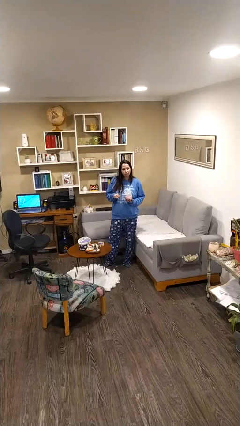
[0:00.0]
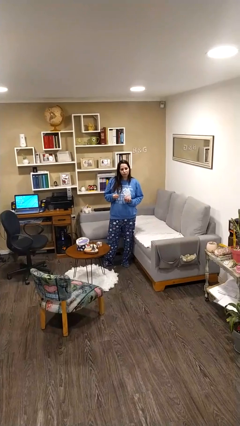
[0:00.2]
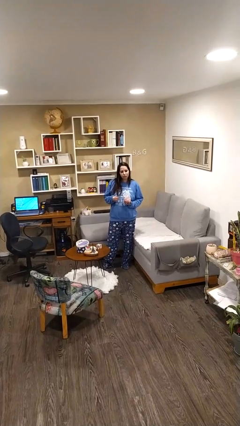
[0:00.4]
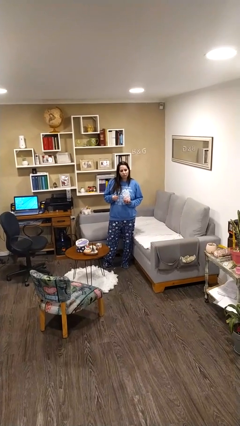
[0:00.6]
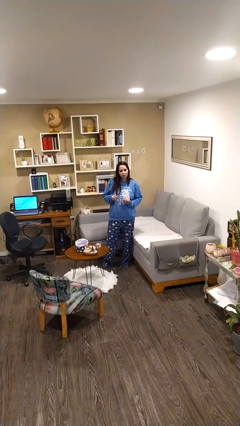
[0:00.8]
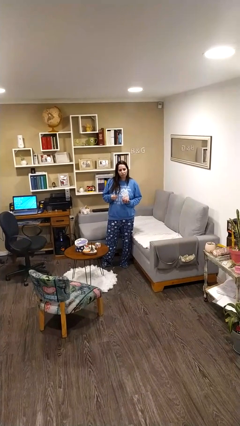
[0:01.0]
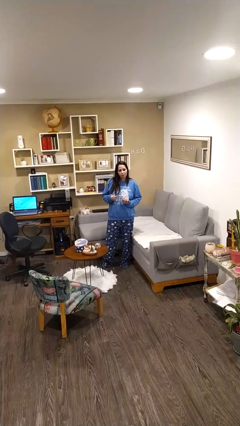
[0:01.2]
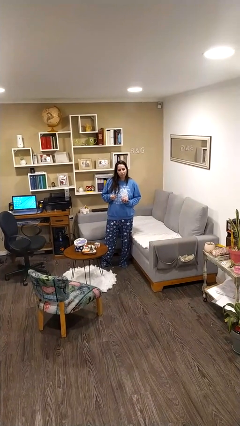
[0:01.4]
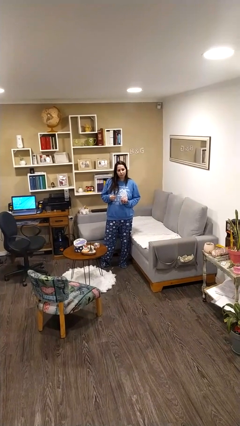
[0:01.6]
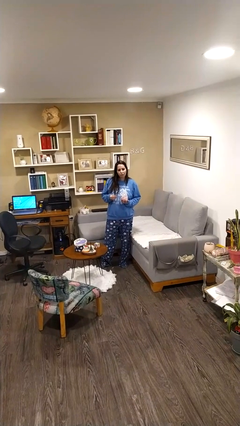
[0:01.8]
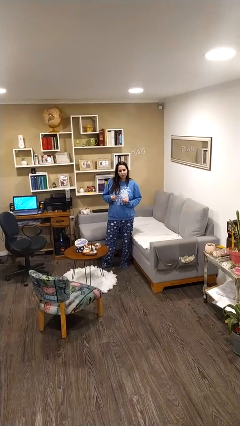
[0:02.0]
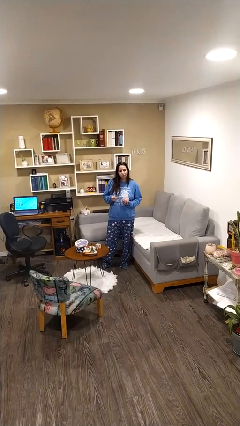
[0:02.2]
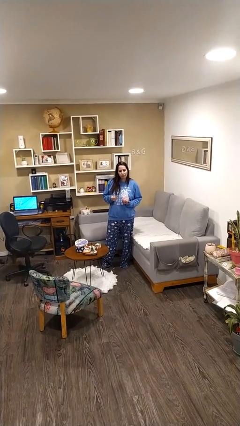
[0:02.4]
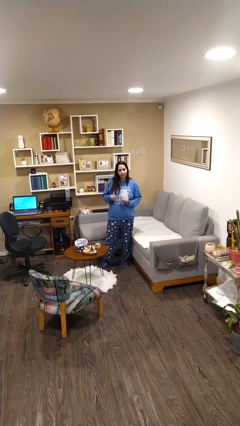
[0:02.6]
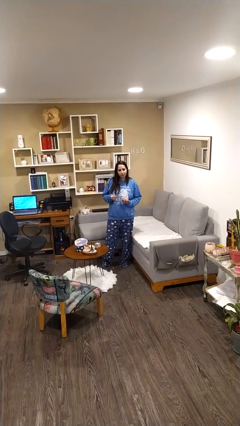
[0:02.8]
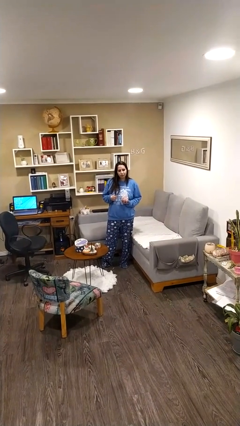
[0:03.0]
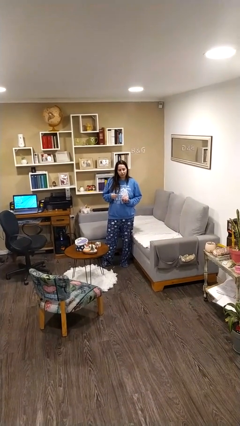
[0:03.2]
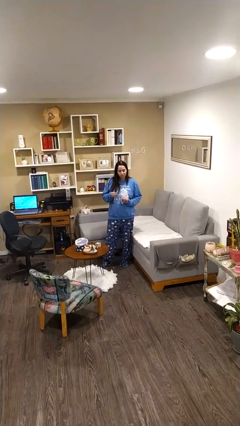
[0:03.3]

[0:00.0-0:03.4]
person eats snack from bag

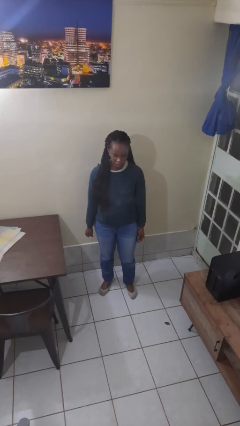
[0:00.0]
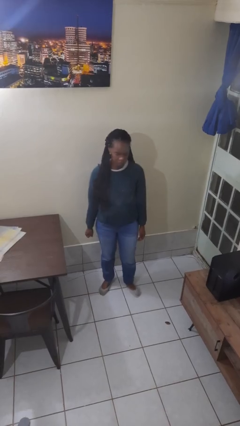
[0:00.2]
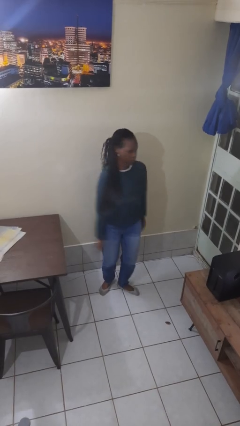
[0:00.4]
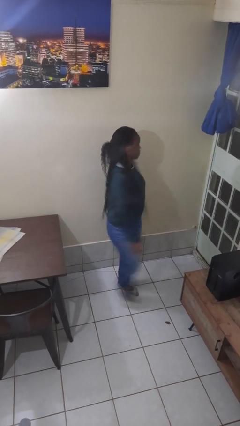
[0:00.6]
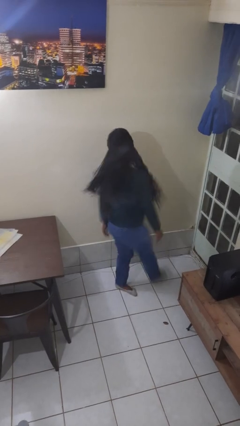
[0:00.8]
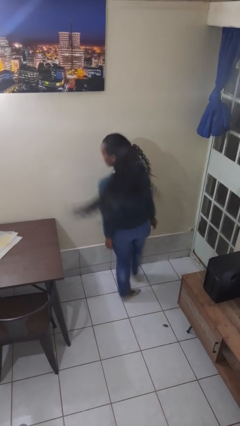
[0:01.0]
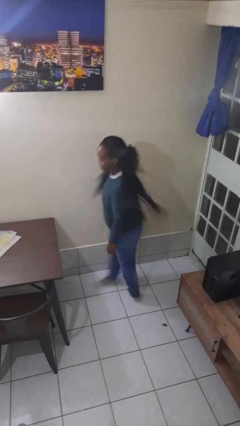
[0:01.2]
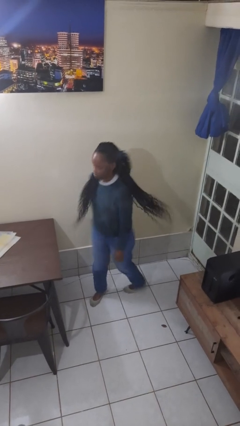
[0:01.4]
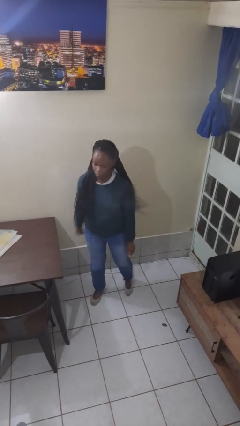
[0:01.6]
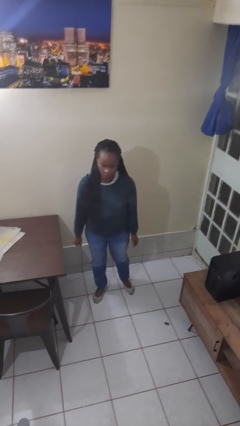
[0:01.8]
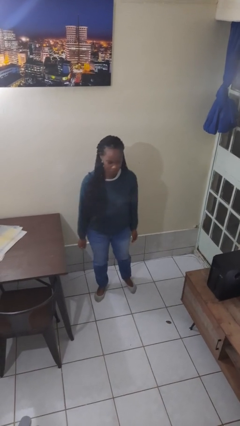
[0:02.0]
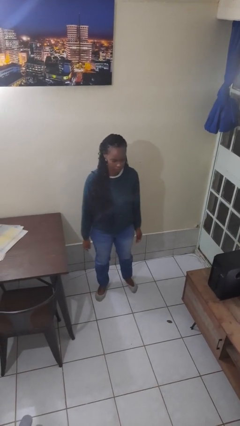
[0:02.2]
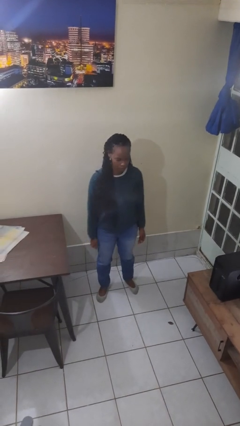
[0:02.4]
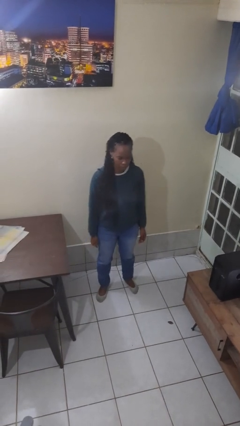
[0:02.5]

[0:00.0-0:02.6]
person twirls

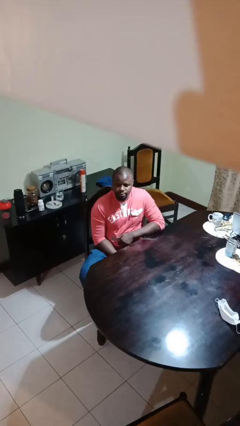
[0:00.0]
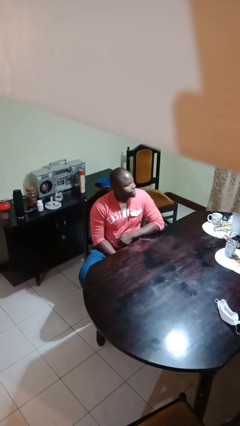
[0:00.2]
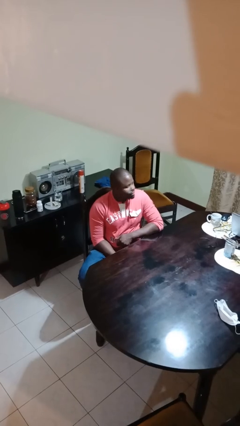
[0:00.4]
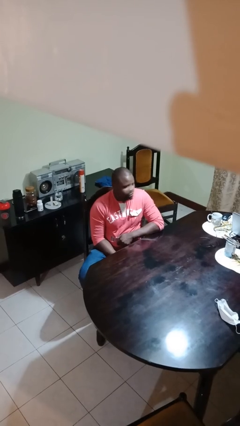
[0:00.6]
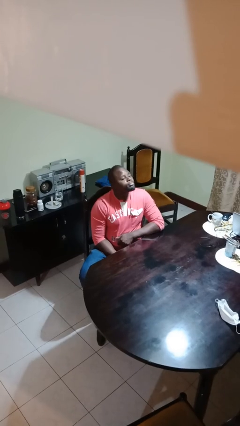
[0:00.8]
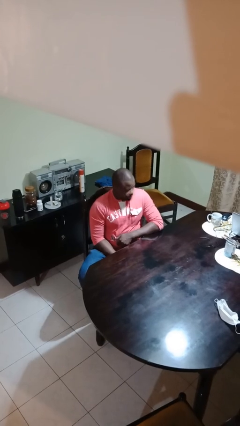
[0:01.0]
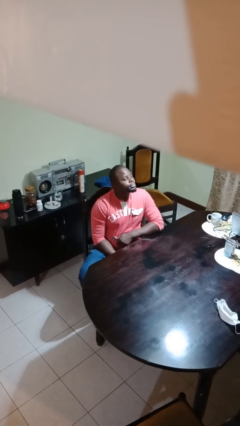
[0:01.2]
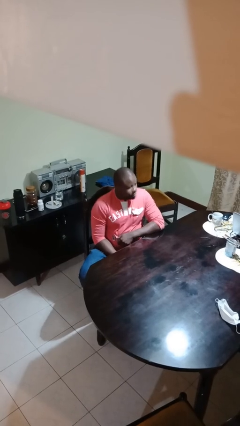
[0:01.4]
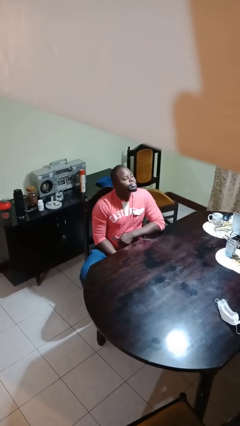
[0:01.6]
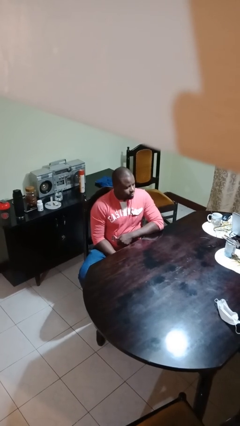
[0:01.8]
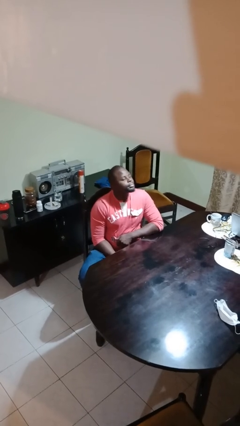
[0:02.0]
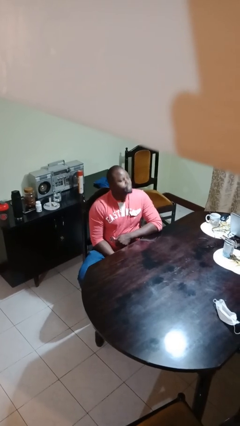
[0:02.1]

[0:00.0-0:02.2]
person nods head

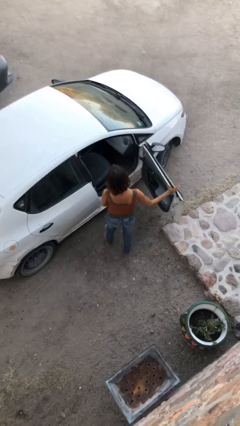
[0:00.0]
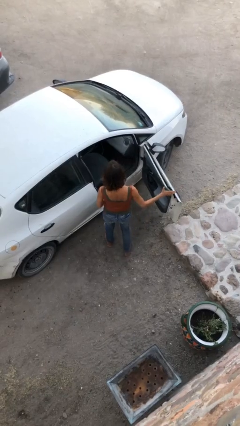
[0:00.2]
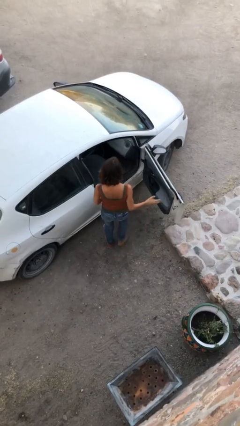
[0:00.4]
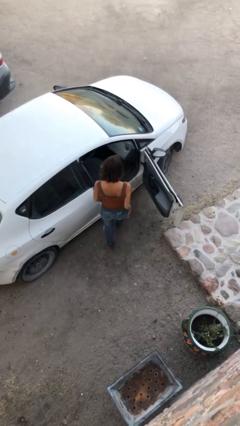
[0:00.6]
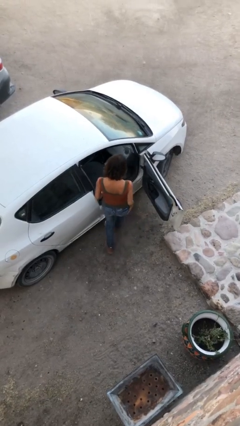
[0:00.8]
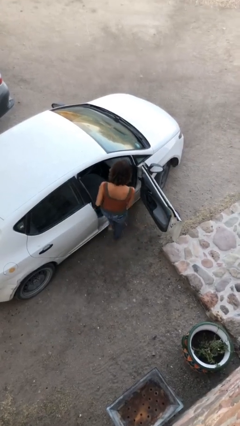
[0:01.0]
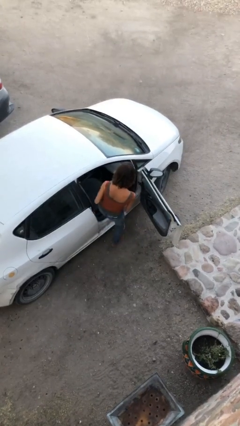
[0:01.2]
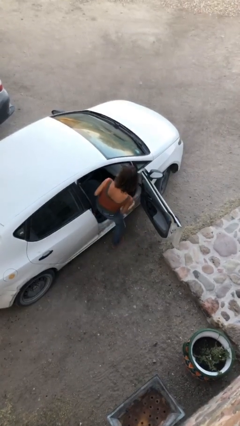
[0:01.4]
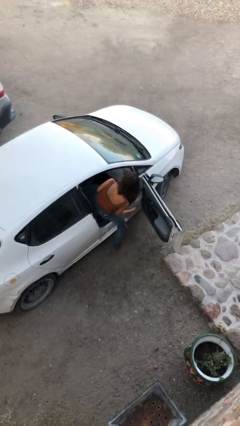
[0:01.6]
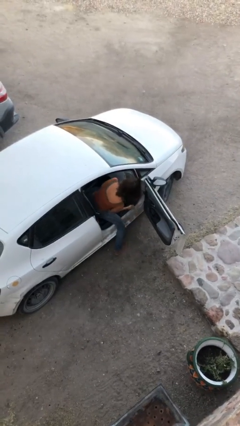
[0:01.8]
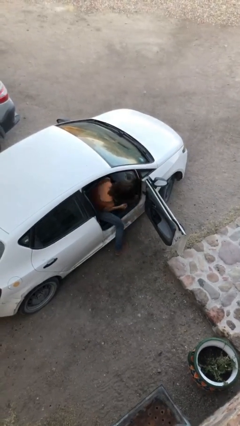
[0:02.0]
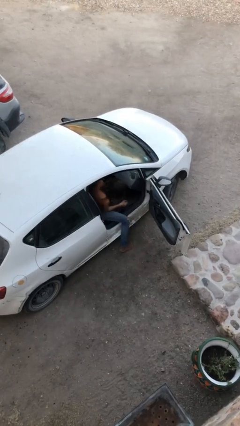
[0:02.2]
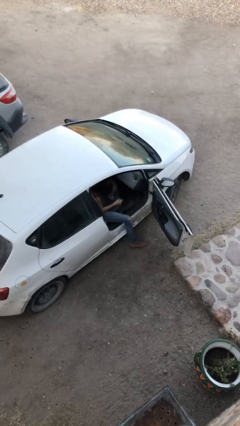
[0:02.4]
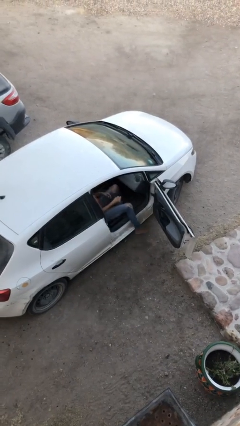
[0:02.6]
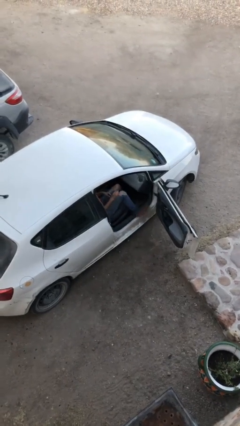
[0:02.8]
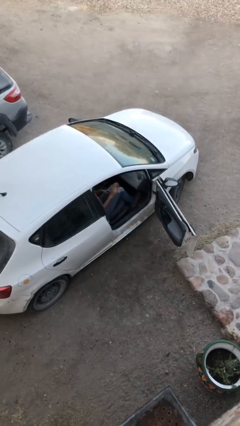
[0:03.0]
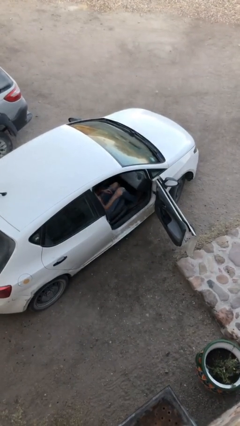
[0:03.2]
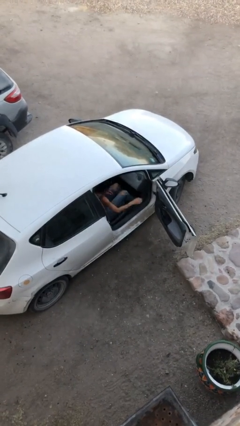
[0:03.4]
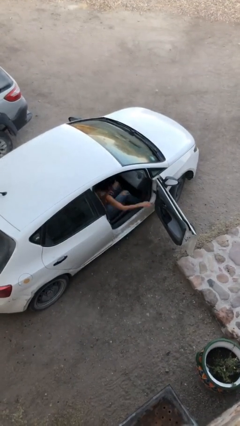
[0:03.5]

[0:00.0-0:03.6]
person enters car

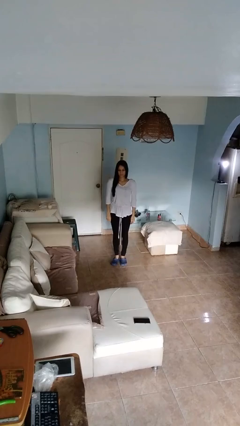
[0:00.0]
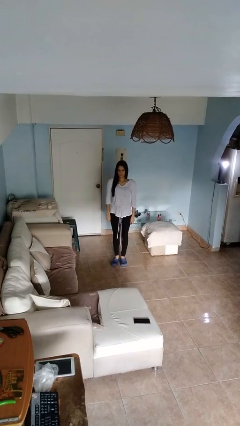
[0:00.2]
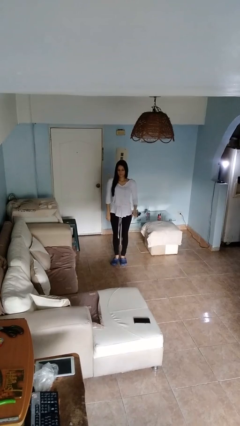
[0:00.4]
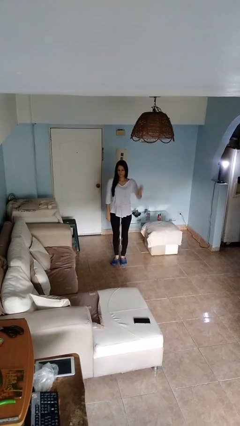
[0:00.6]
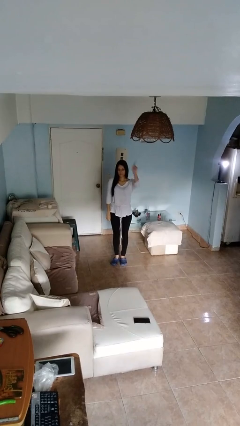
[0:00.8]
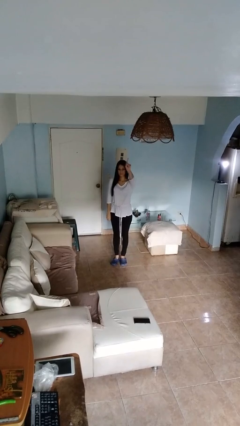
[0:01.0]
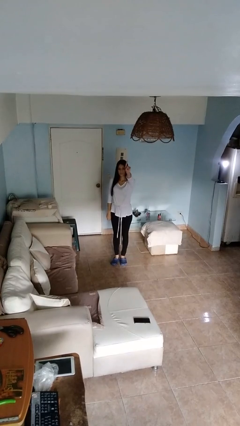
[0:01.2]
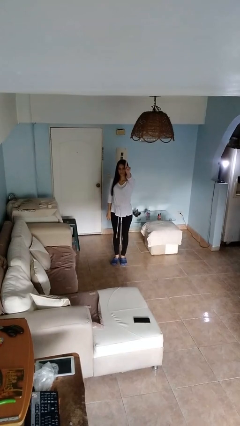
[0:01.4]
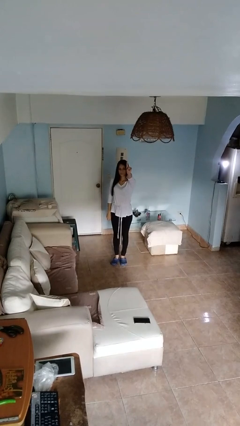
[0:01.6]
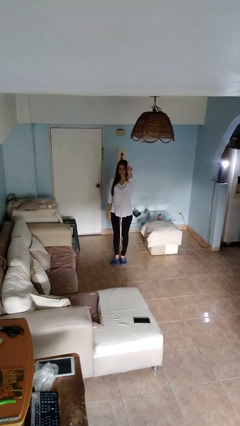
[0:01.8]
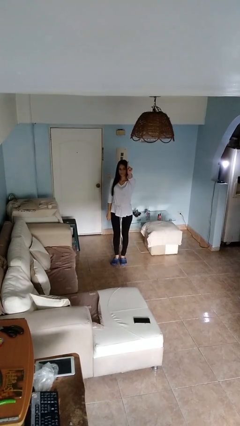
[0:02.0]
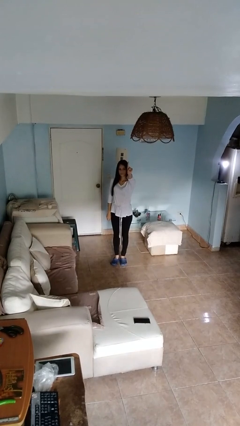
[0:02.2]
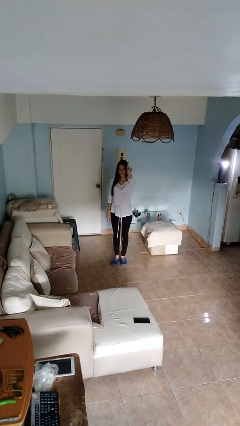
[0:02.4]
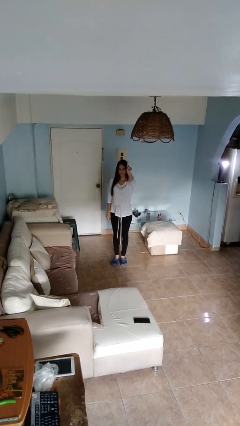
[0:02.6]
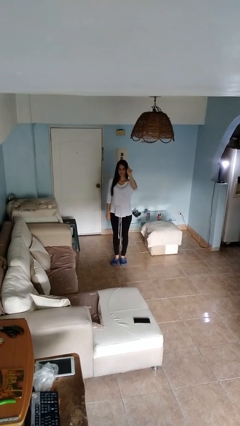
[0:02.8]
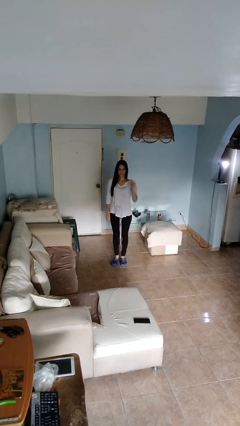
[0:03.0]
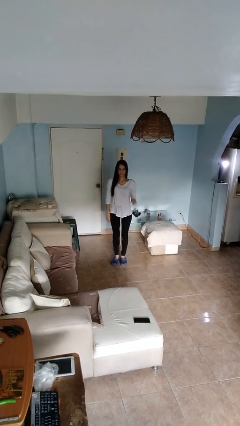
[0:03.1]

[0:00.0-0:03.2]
person gestures number one

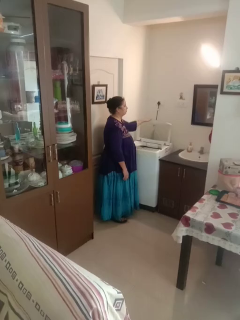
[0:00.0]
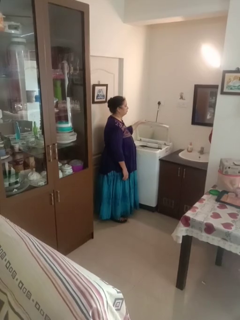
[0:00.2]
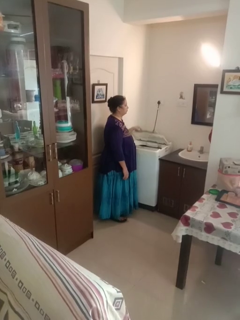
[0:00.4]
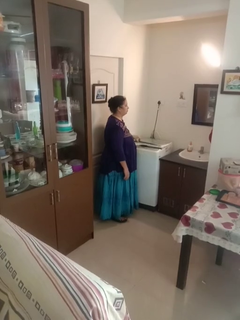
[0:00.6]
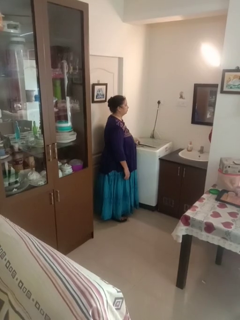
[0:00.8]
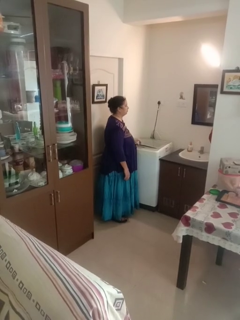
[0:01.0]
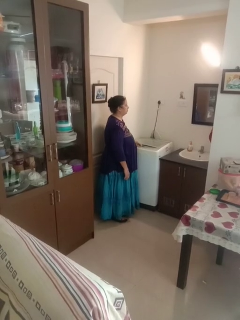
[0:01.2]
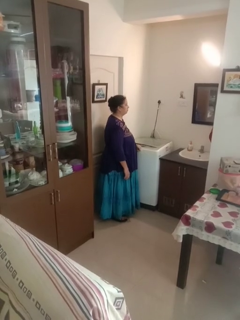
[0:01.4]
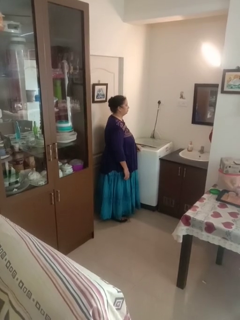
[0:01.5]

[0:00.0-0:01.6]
person closes clothes washer

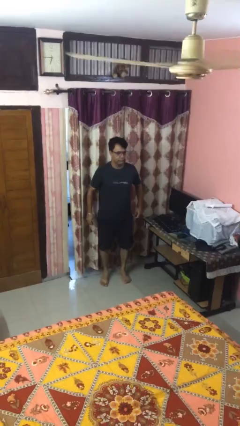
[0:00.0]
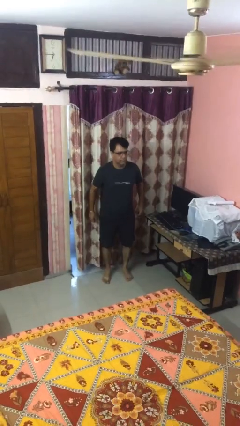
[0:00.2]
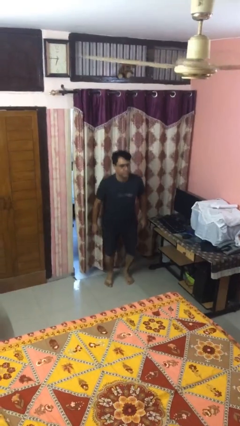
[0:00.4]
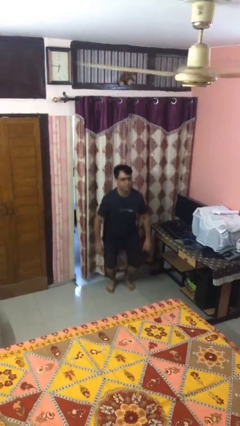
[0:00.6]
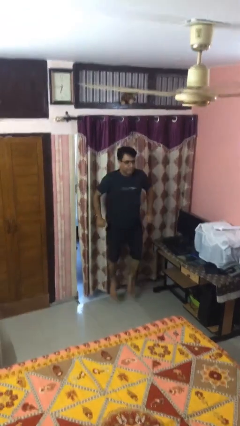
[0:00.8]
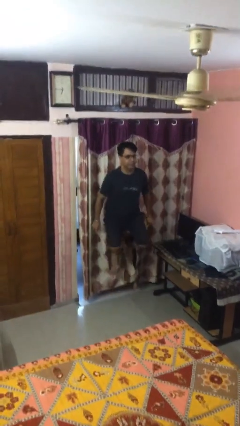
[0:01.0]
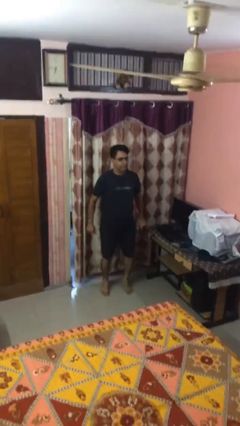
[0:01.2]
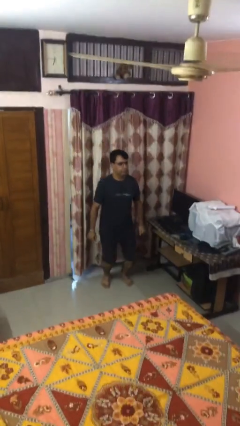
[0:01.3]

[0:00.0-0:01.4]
person jumps
